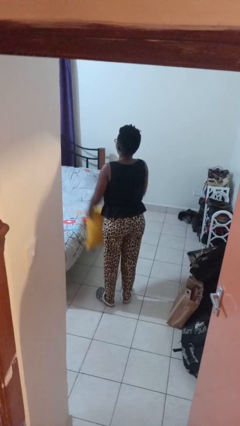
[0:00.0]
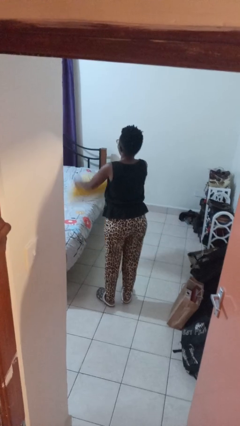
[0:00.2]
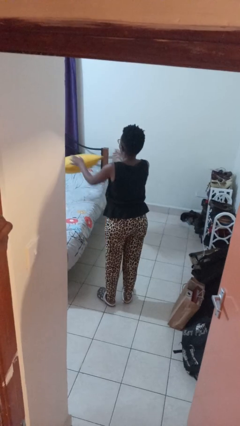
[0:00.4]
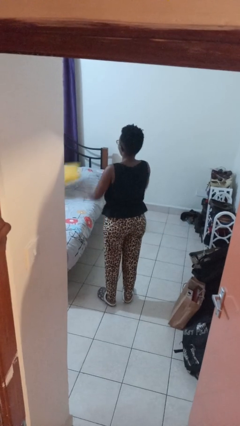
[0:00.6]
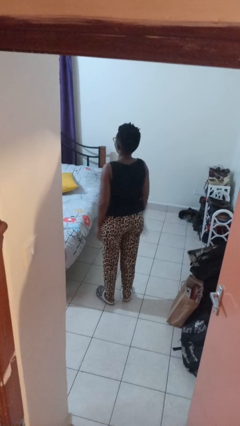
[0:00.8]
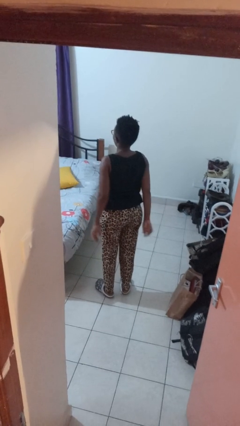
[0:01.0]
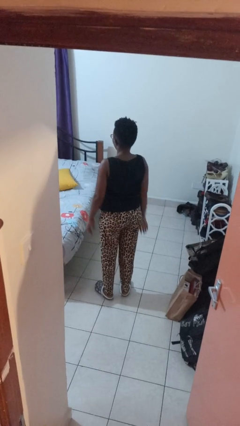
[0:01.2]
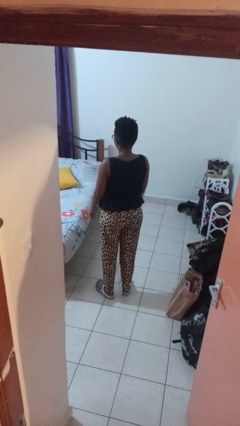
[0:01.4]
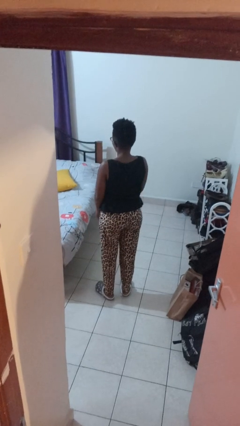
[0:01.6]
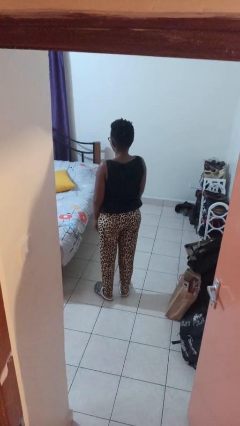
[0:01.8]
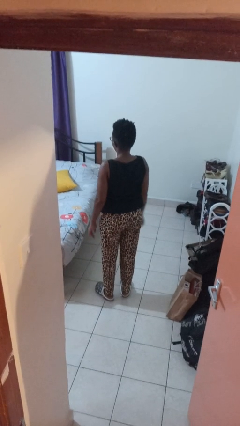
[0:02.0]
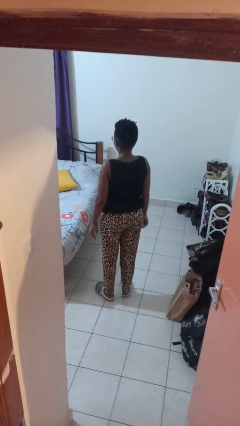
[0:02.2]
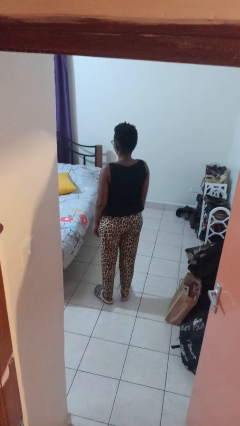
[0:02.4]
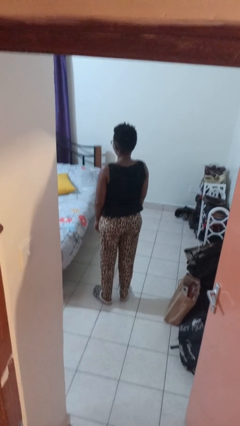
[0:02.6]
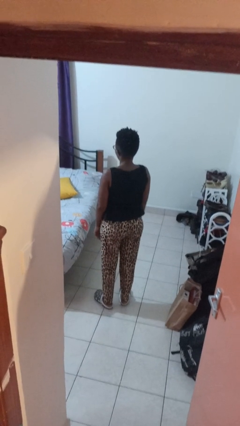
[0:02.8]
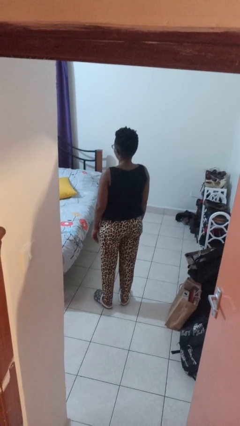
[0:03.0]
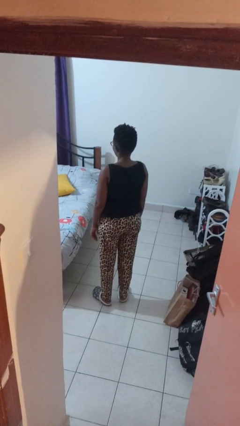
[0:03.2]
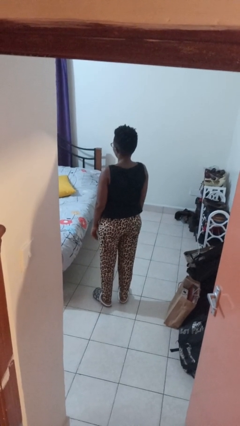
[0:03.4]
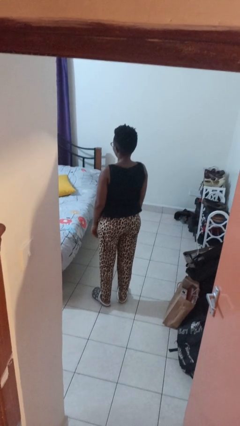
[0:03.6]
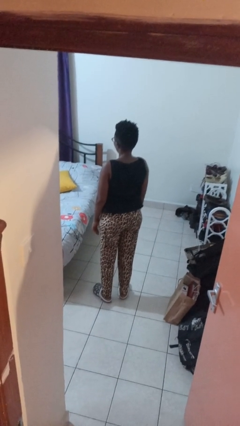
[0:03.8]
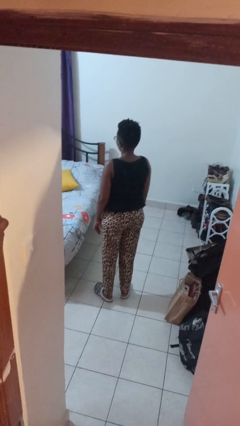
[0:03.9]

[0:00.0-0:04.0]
person throws object on bed

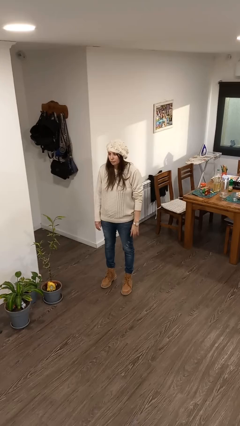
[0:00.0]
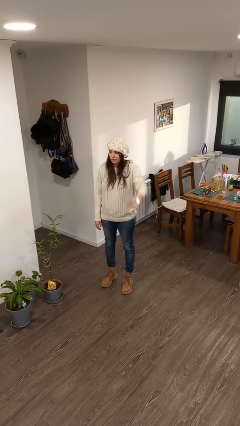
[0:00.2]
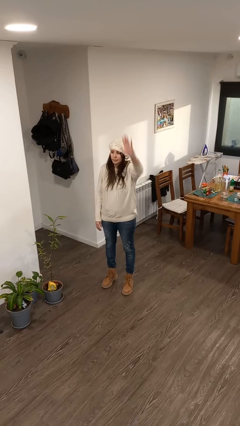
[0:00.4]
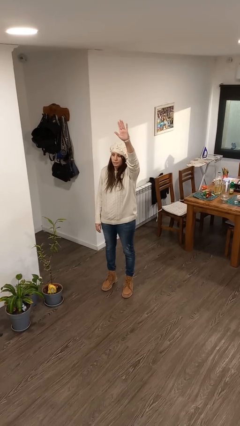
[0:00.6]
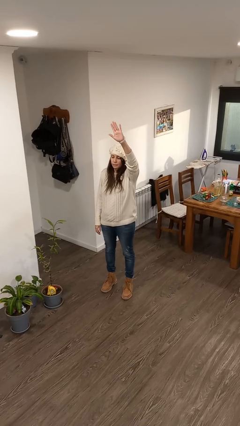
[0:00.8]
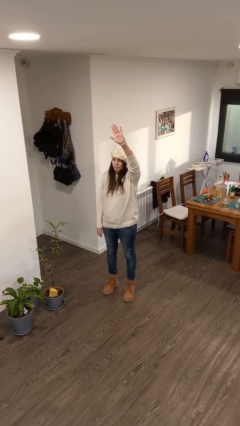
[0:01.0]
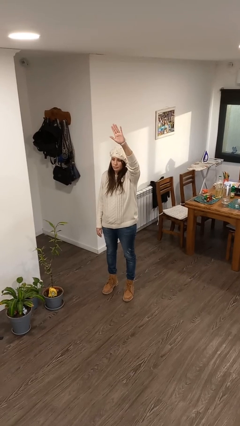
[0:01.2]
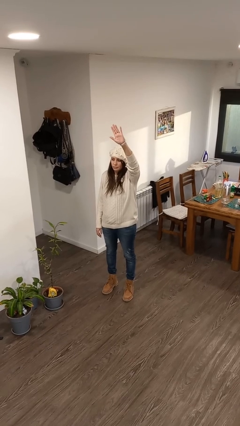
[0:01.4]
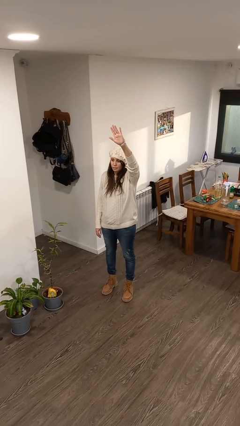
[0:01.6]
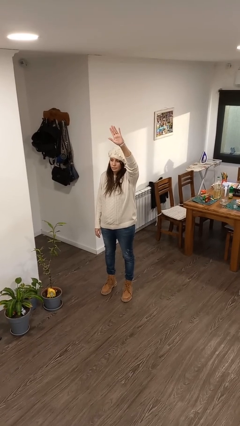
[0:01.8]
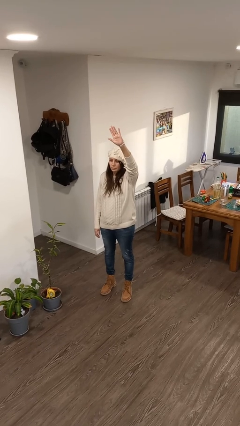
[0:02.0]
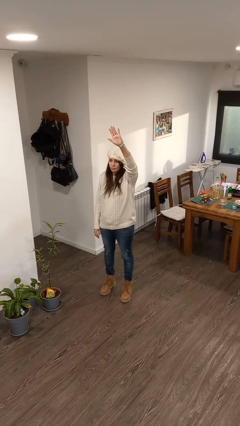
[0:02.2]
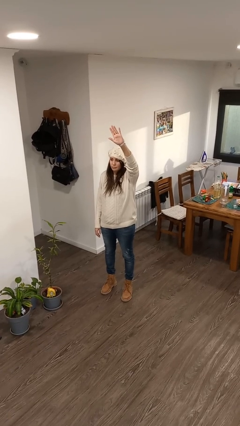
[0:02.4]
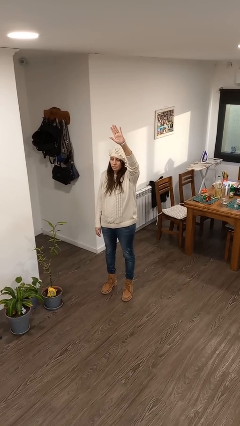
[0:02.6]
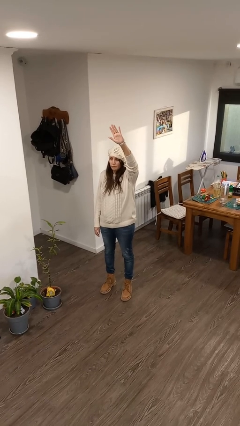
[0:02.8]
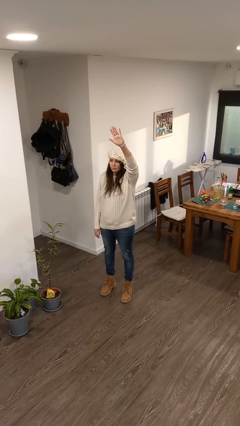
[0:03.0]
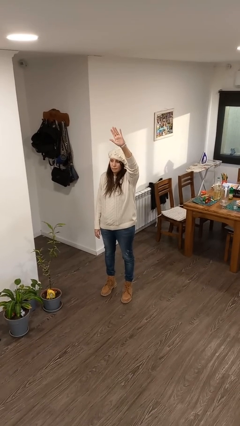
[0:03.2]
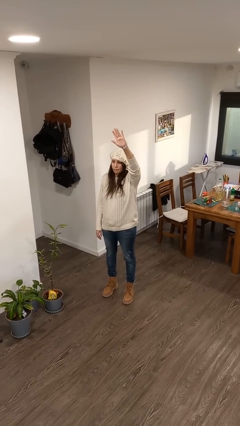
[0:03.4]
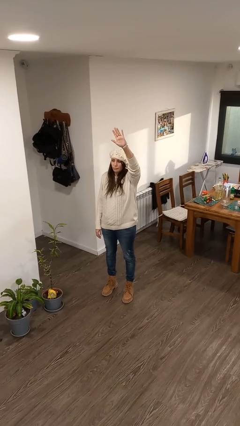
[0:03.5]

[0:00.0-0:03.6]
person gestures raise hand

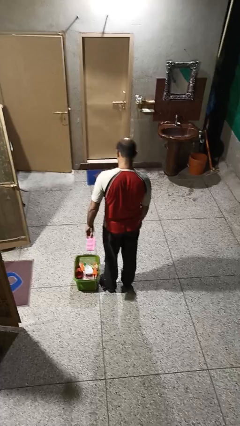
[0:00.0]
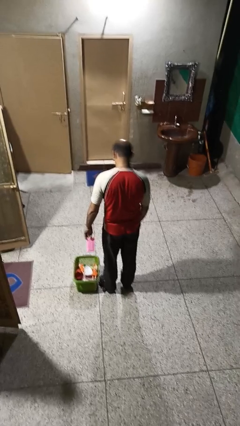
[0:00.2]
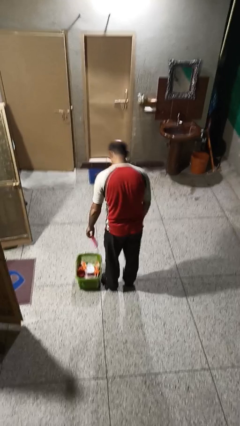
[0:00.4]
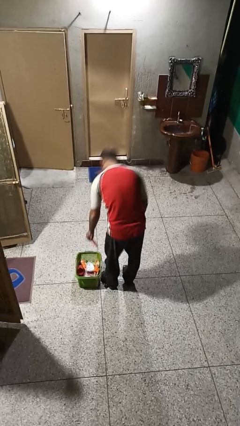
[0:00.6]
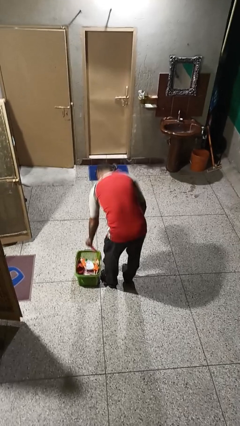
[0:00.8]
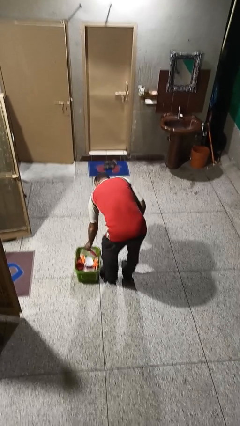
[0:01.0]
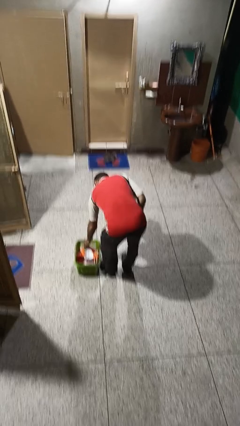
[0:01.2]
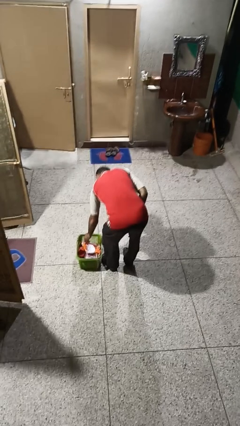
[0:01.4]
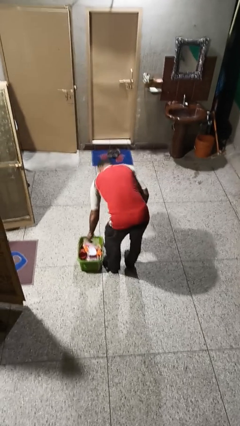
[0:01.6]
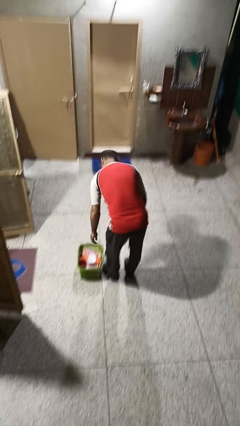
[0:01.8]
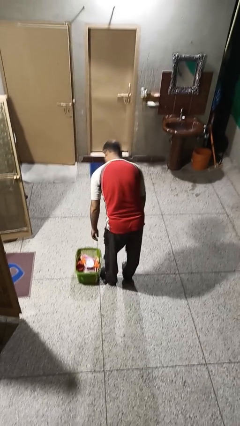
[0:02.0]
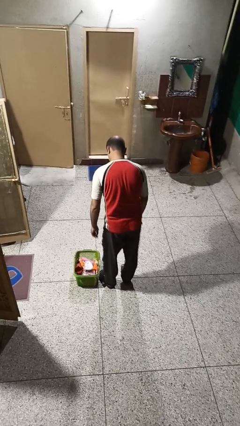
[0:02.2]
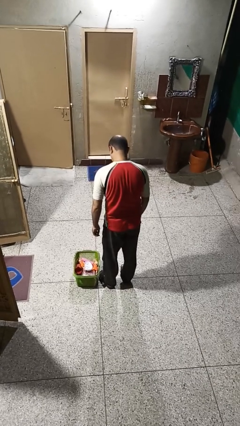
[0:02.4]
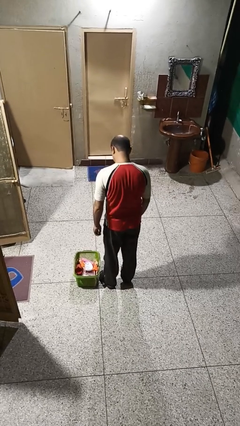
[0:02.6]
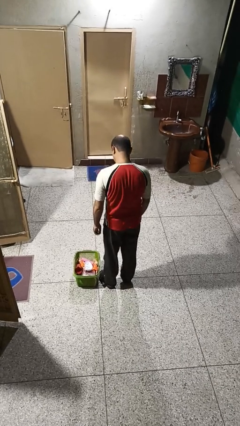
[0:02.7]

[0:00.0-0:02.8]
person puts object into basket

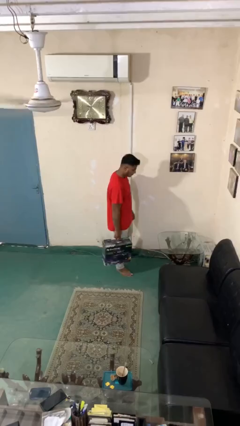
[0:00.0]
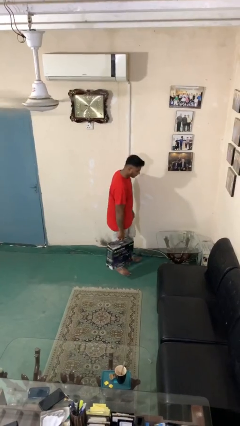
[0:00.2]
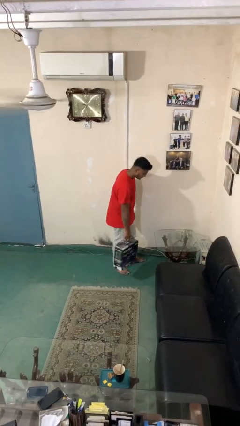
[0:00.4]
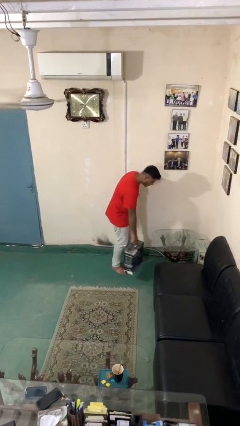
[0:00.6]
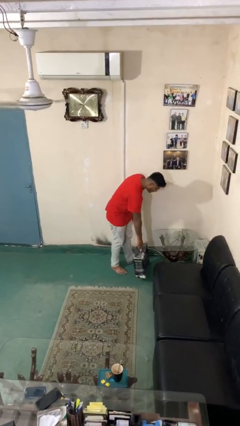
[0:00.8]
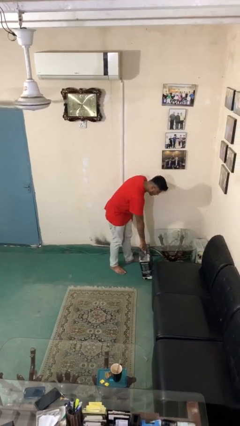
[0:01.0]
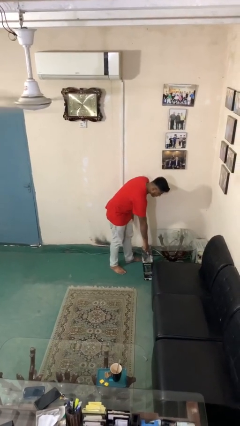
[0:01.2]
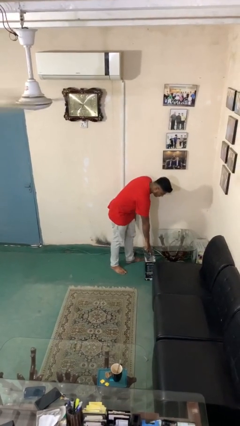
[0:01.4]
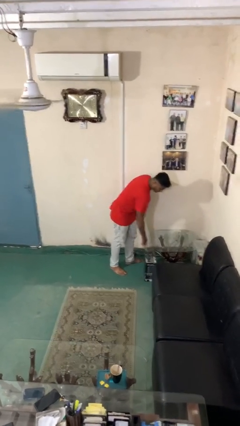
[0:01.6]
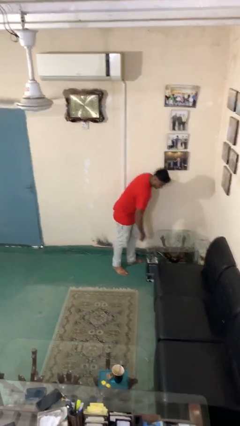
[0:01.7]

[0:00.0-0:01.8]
person puts down object on floor

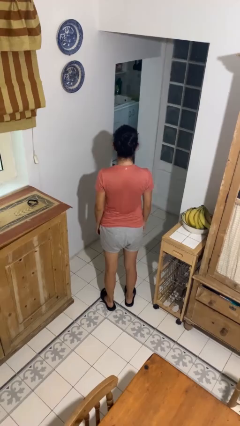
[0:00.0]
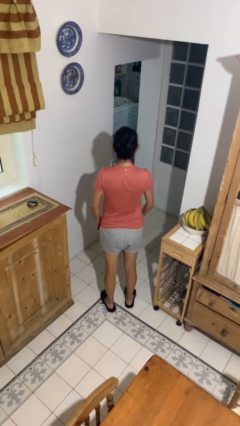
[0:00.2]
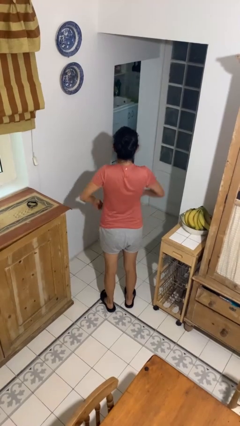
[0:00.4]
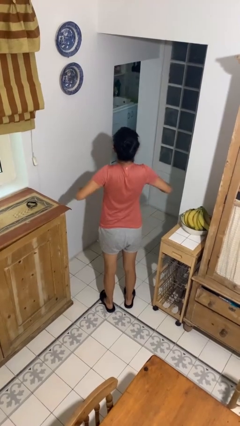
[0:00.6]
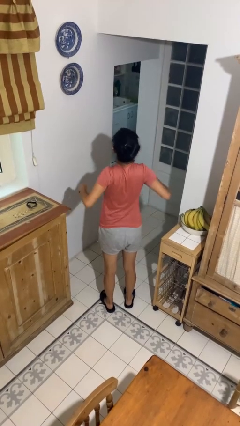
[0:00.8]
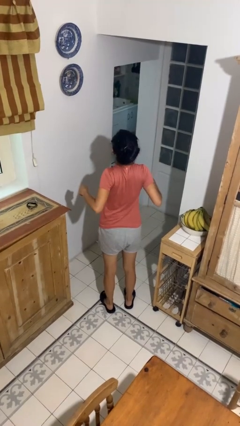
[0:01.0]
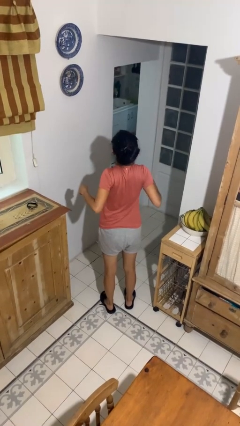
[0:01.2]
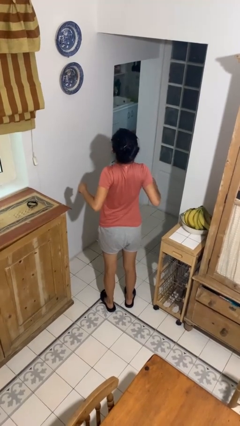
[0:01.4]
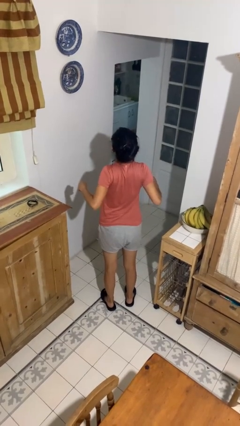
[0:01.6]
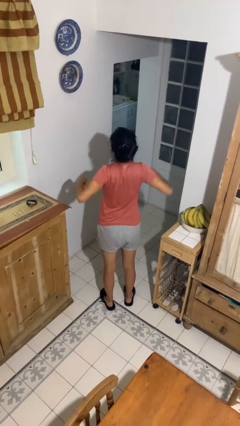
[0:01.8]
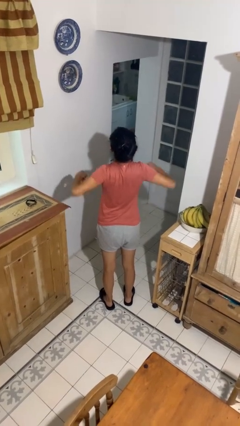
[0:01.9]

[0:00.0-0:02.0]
person stretches back

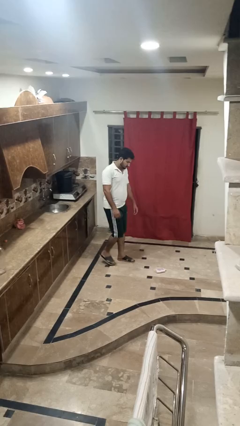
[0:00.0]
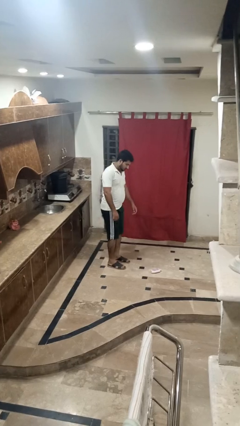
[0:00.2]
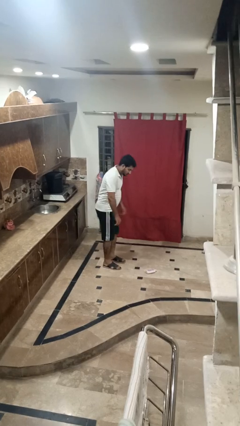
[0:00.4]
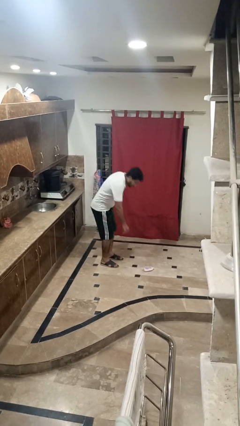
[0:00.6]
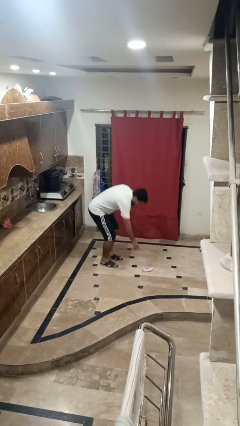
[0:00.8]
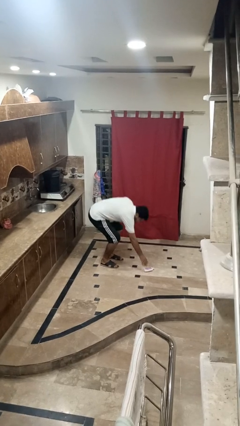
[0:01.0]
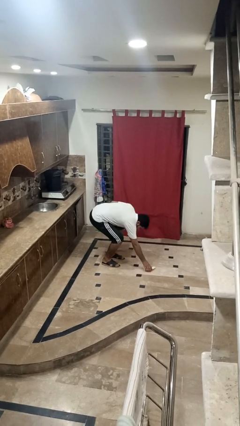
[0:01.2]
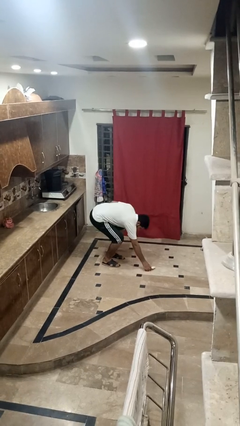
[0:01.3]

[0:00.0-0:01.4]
person picks up object from floor

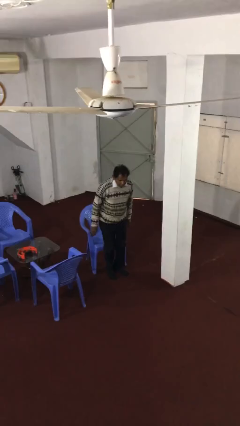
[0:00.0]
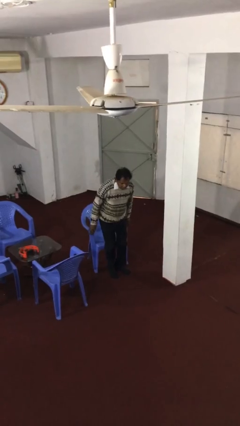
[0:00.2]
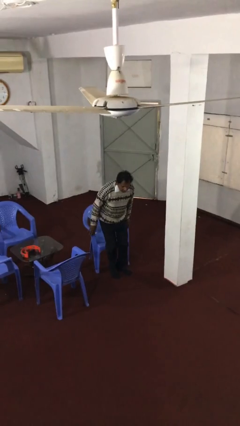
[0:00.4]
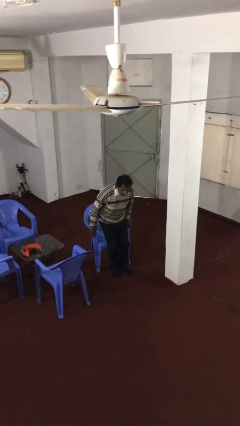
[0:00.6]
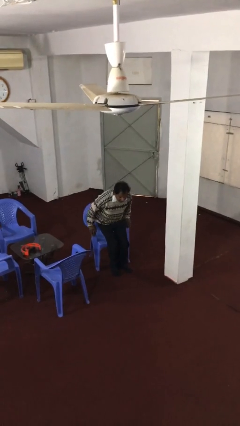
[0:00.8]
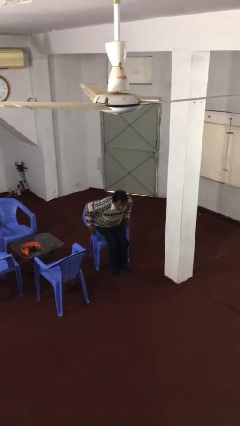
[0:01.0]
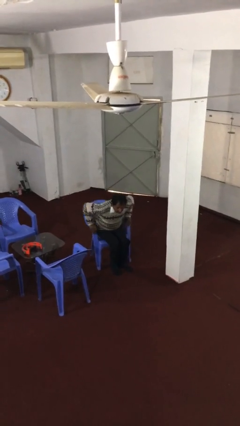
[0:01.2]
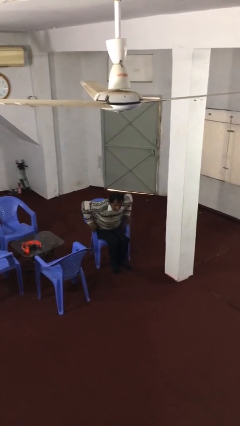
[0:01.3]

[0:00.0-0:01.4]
person sits down
